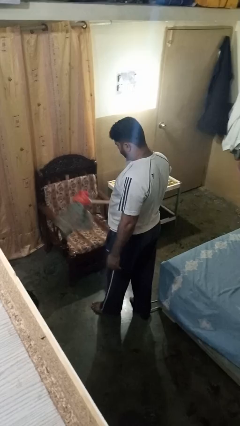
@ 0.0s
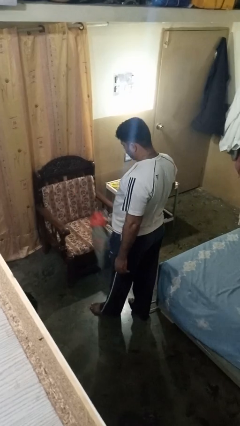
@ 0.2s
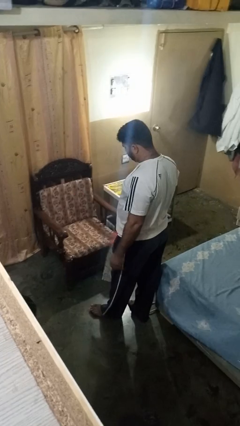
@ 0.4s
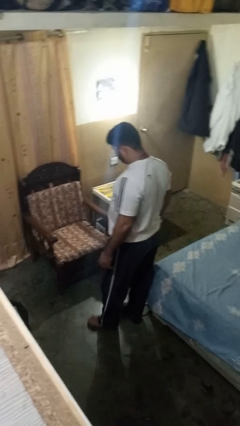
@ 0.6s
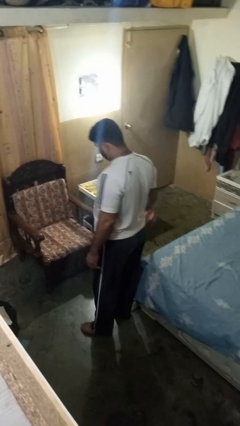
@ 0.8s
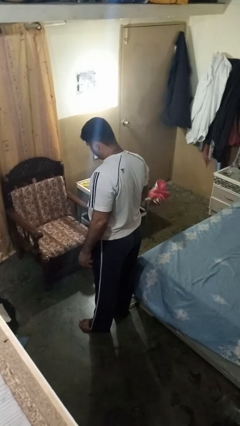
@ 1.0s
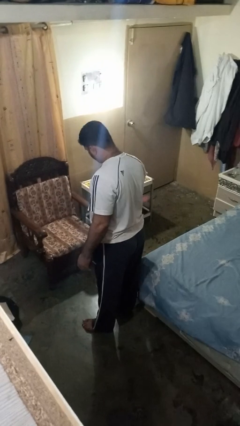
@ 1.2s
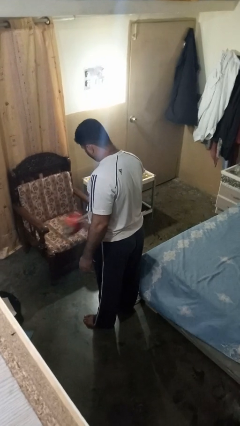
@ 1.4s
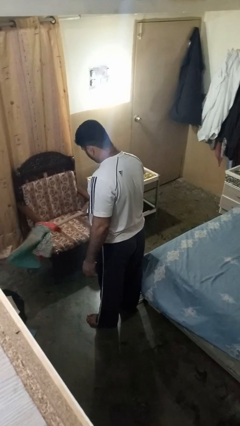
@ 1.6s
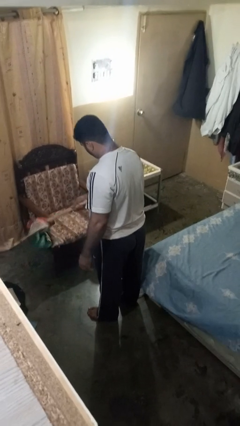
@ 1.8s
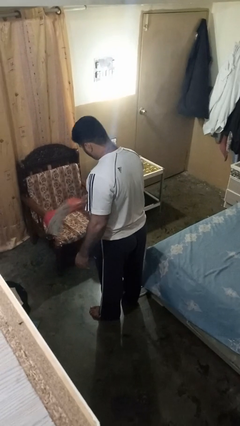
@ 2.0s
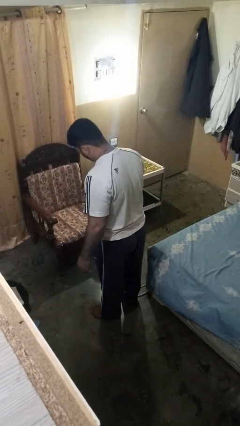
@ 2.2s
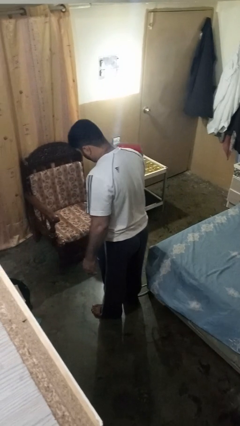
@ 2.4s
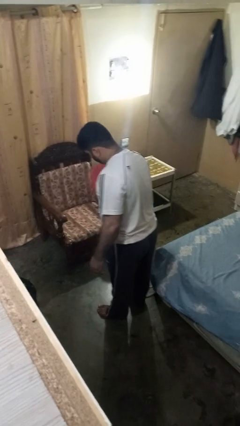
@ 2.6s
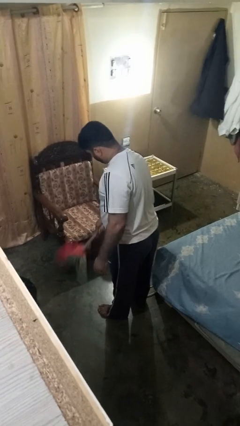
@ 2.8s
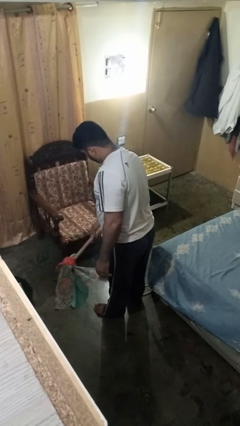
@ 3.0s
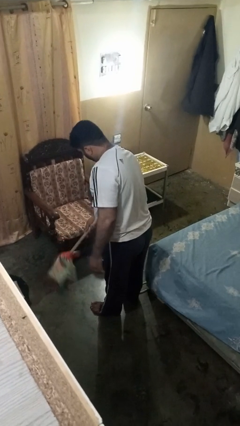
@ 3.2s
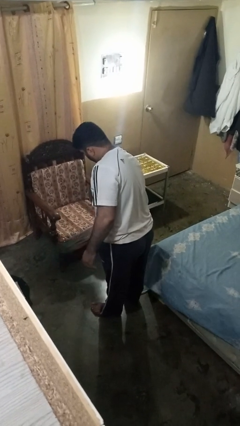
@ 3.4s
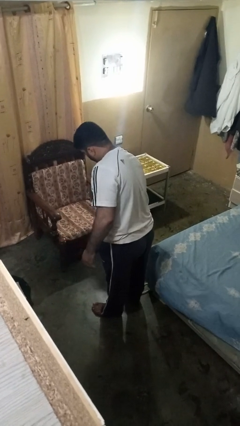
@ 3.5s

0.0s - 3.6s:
person dusts furniture

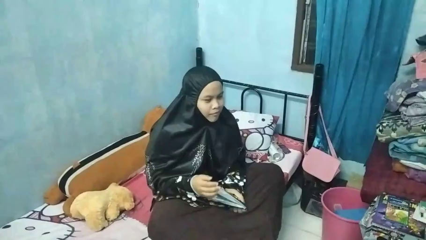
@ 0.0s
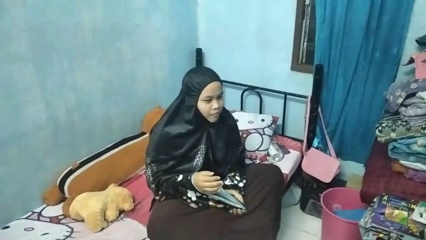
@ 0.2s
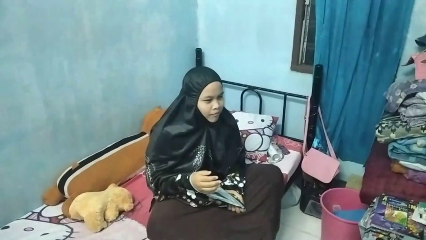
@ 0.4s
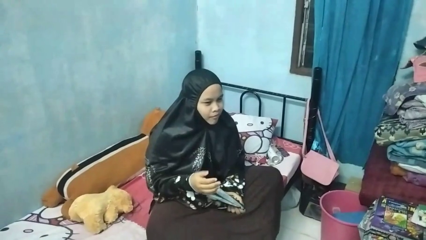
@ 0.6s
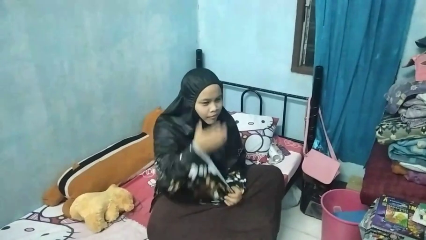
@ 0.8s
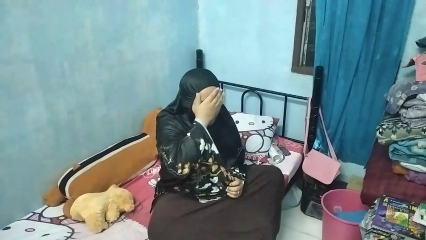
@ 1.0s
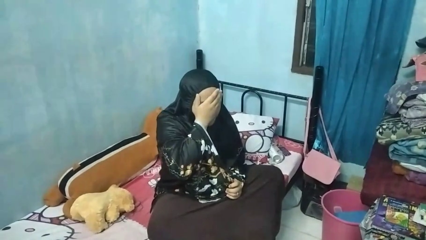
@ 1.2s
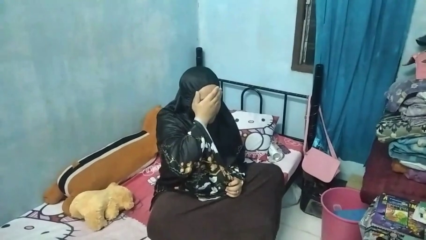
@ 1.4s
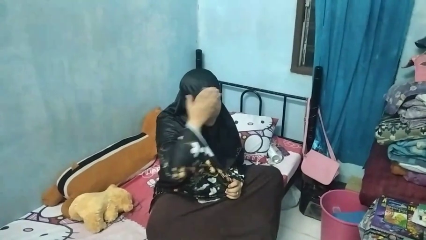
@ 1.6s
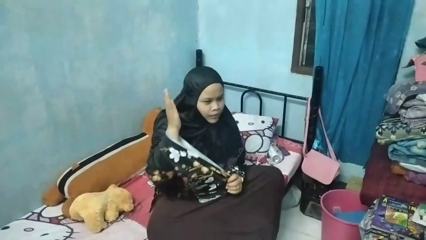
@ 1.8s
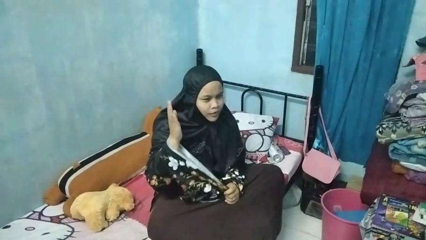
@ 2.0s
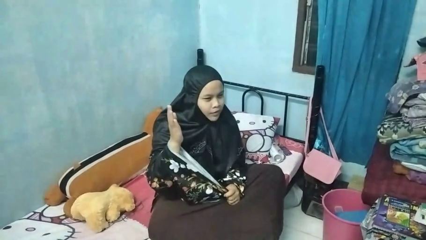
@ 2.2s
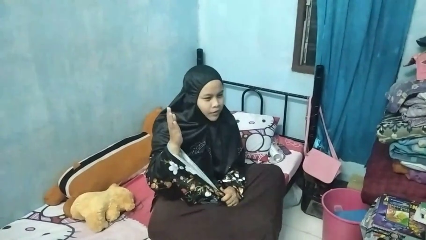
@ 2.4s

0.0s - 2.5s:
person covers face with hands

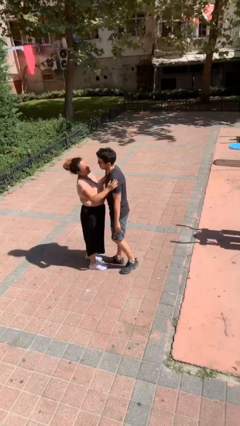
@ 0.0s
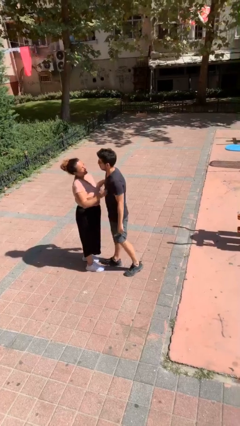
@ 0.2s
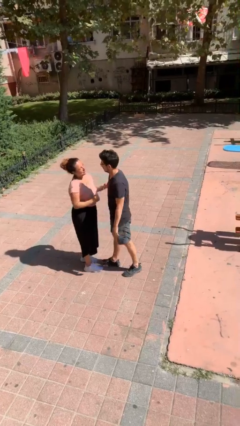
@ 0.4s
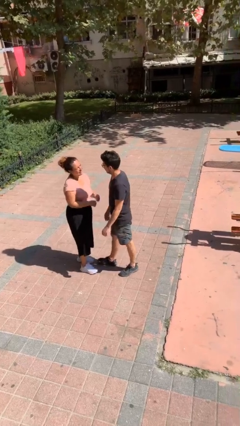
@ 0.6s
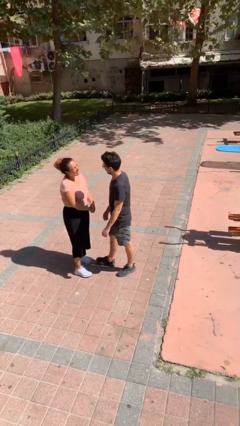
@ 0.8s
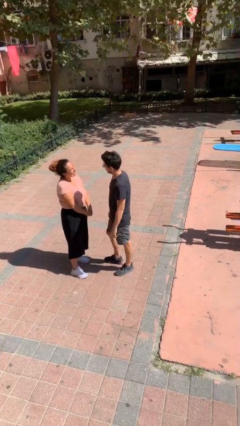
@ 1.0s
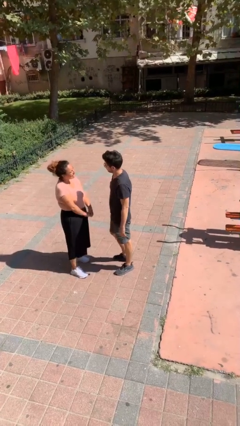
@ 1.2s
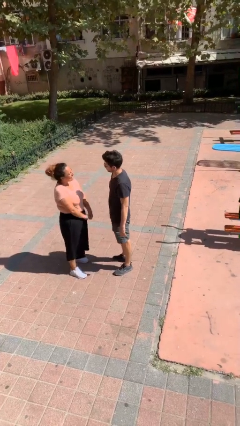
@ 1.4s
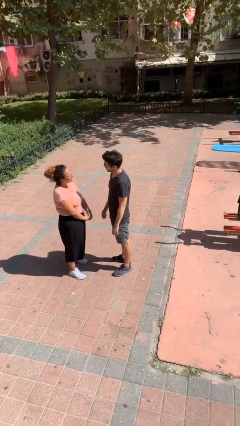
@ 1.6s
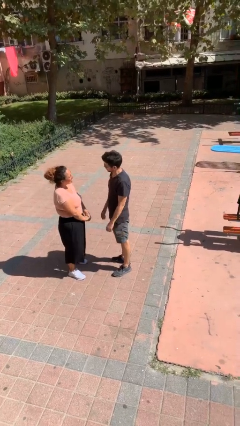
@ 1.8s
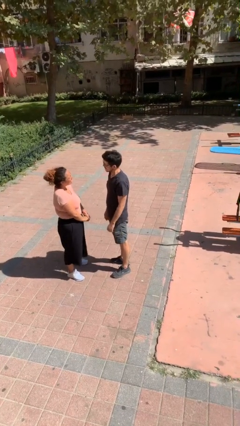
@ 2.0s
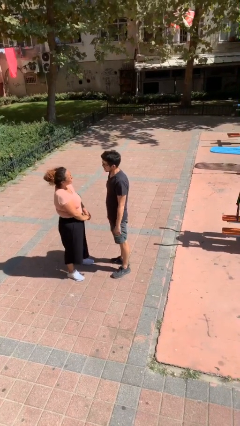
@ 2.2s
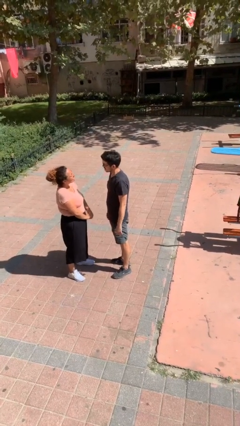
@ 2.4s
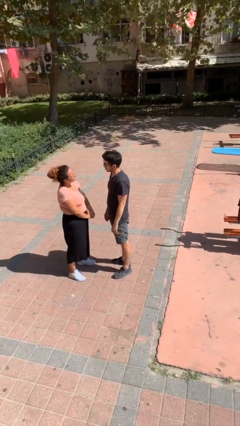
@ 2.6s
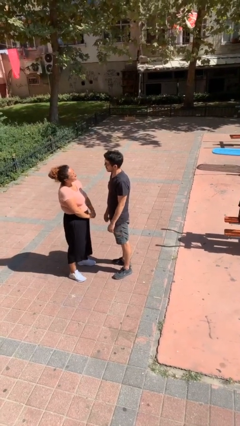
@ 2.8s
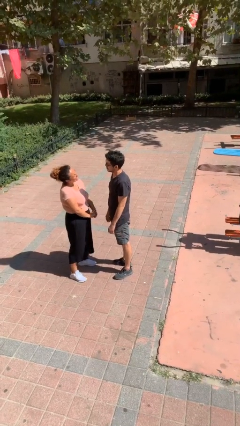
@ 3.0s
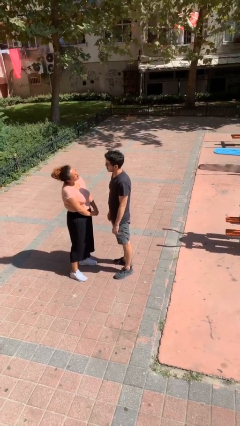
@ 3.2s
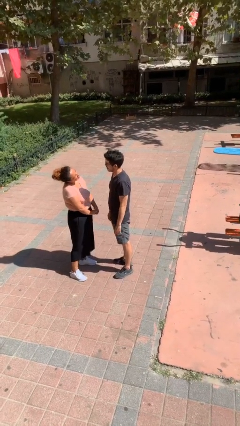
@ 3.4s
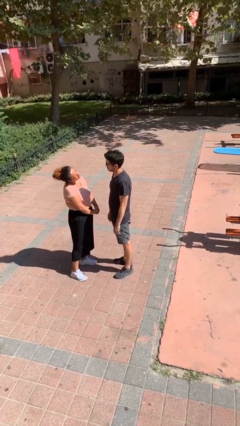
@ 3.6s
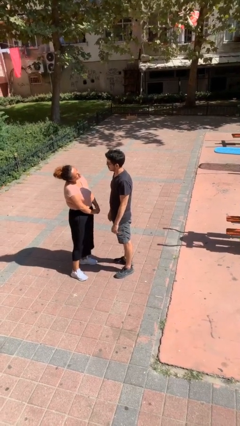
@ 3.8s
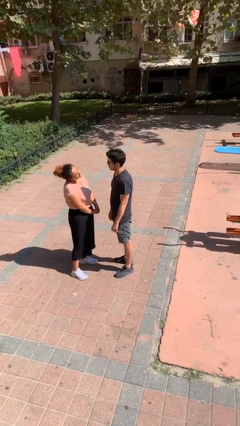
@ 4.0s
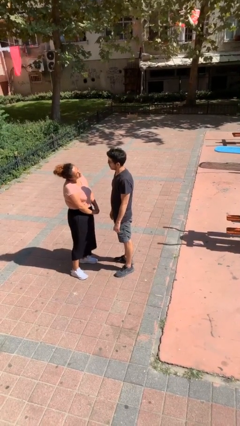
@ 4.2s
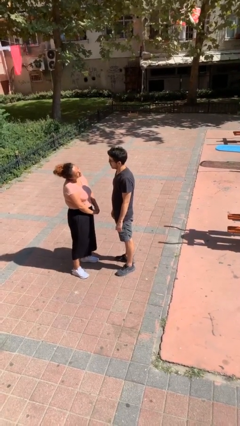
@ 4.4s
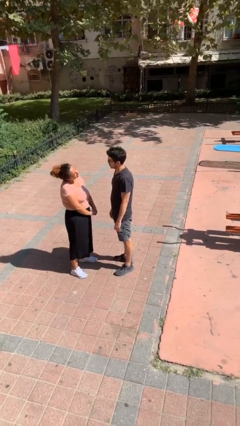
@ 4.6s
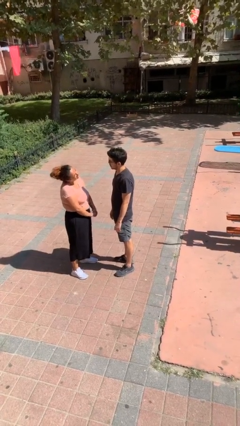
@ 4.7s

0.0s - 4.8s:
person talks to person

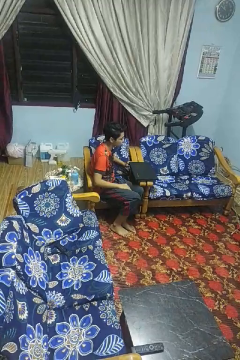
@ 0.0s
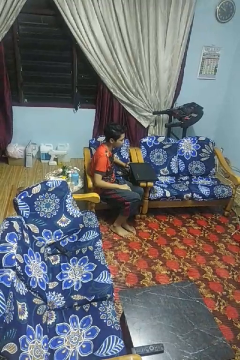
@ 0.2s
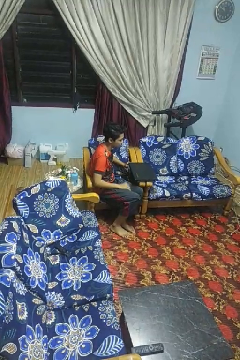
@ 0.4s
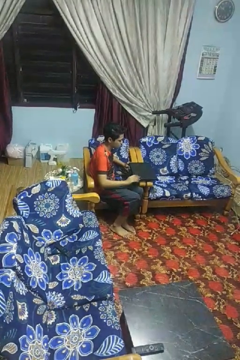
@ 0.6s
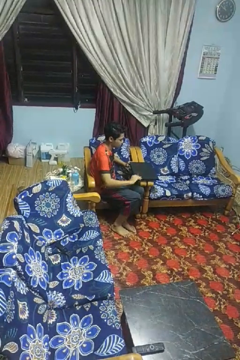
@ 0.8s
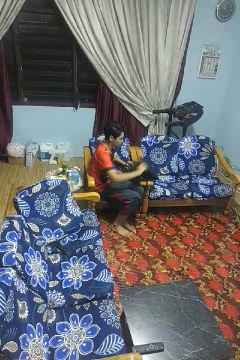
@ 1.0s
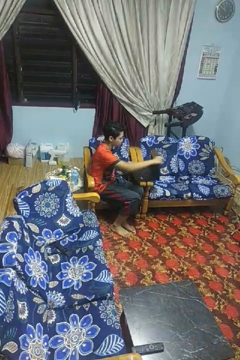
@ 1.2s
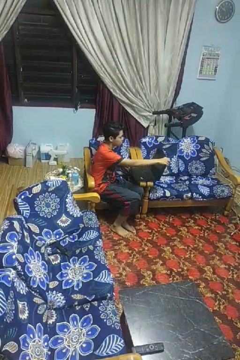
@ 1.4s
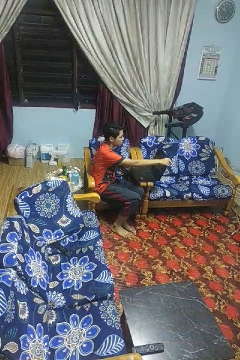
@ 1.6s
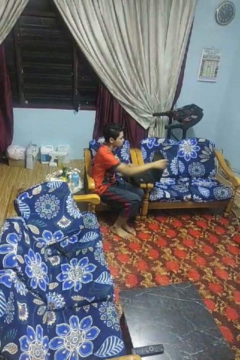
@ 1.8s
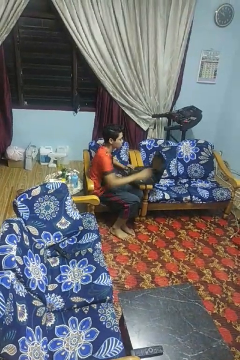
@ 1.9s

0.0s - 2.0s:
person opens laptop

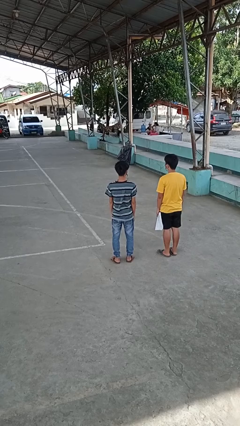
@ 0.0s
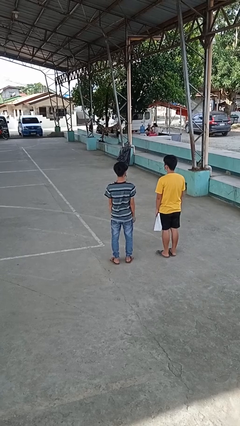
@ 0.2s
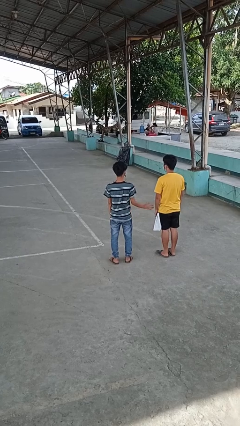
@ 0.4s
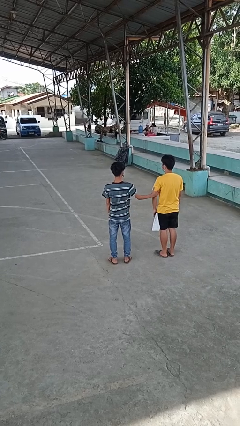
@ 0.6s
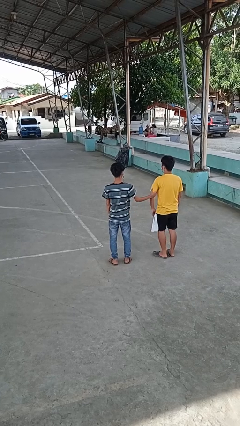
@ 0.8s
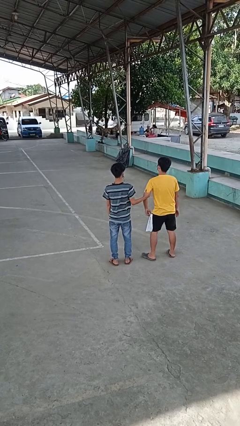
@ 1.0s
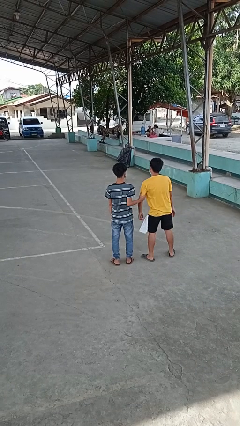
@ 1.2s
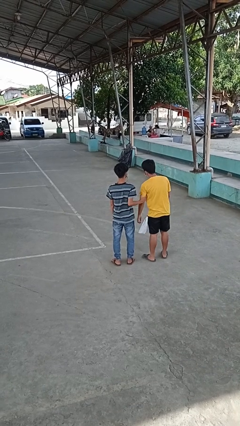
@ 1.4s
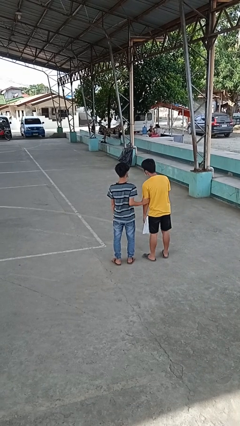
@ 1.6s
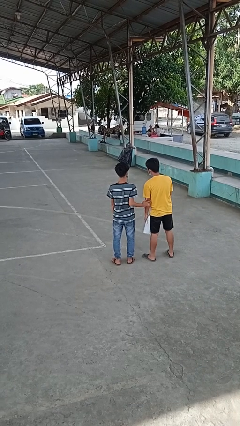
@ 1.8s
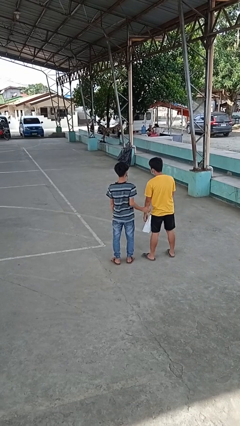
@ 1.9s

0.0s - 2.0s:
person grabs person by bicep

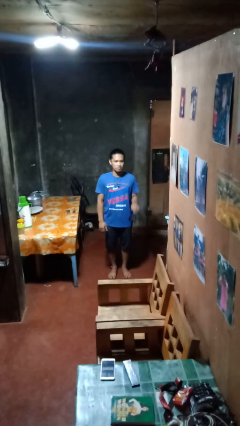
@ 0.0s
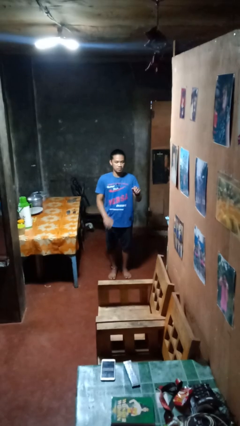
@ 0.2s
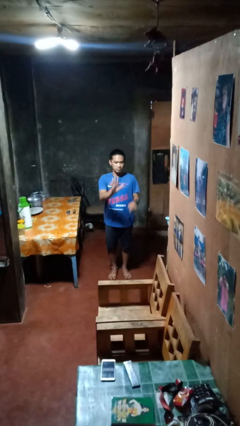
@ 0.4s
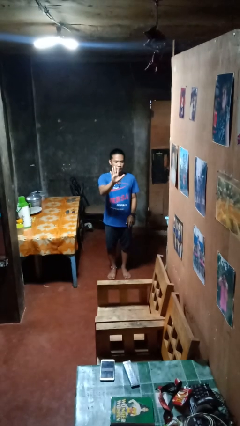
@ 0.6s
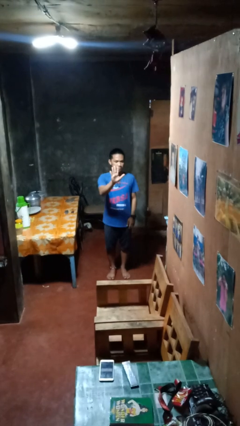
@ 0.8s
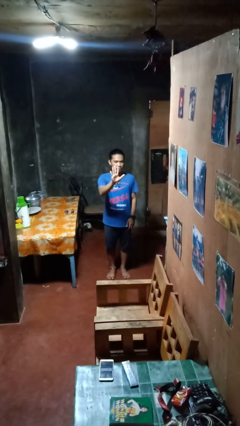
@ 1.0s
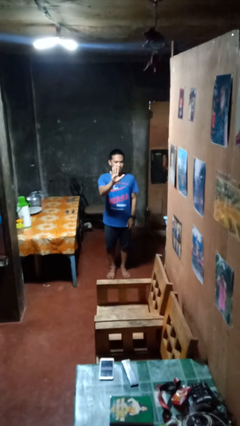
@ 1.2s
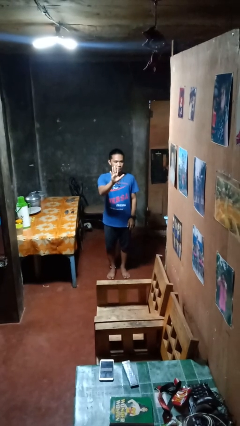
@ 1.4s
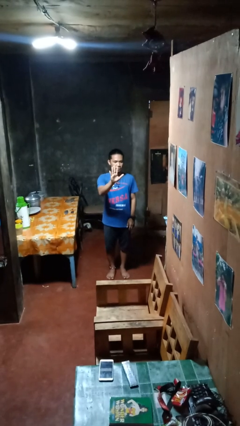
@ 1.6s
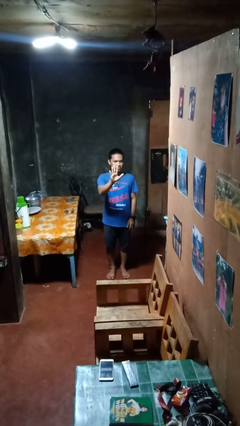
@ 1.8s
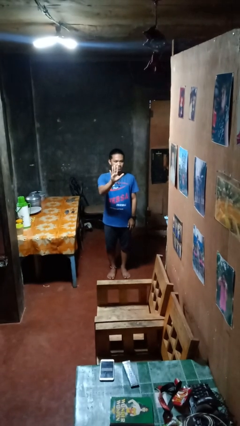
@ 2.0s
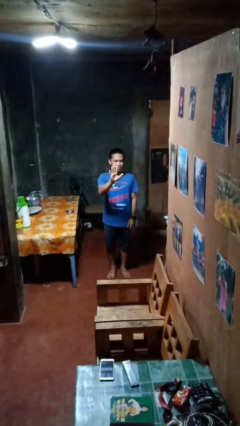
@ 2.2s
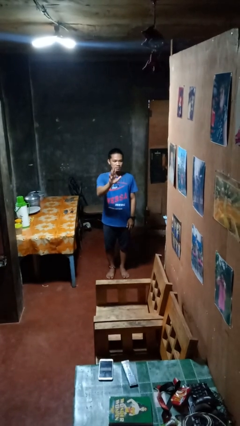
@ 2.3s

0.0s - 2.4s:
person gestures number five

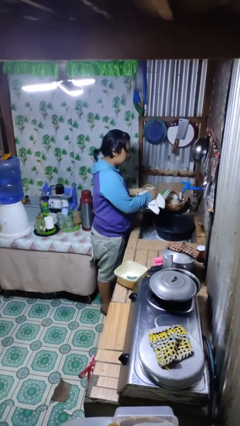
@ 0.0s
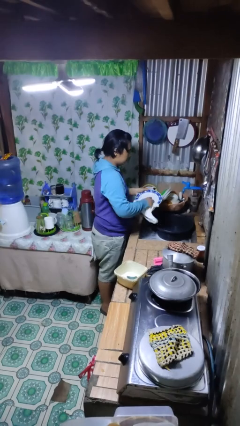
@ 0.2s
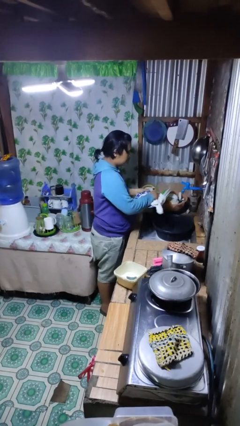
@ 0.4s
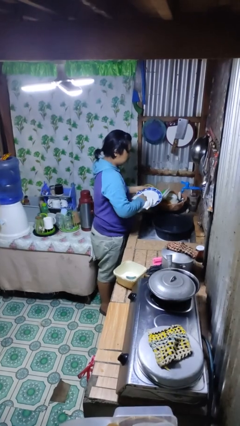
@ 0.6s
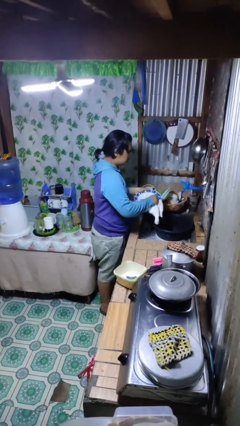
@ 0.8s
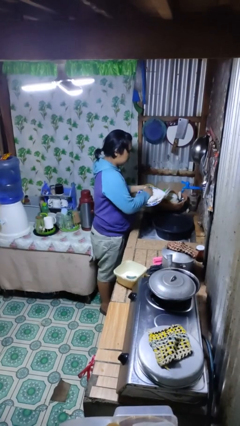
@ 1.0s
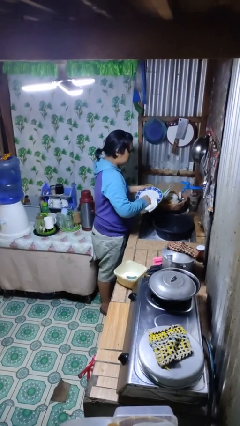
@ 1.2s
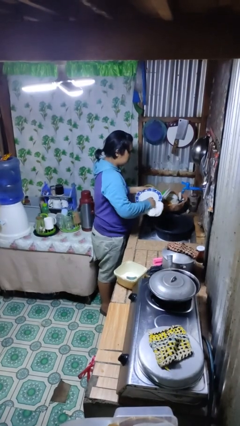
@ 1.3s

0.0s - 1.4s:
person dries dish
